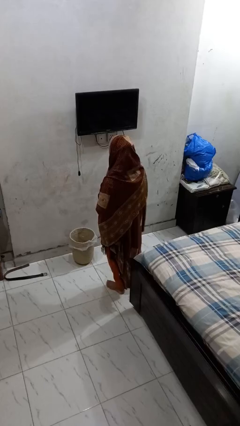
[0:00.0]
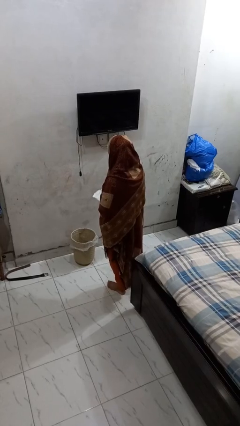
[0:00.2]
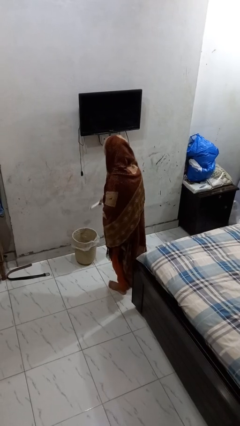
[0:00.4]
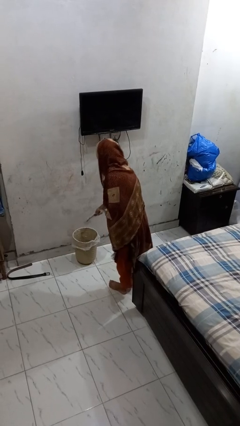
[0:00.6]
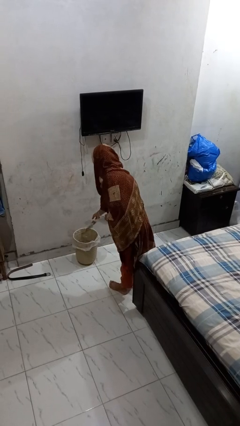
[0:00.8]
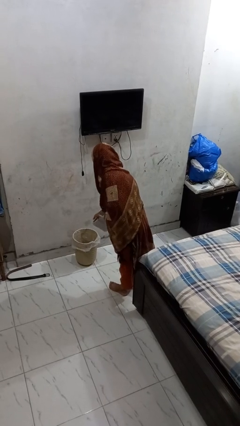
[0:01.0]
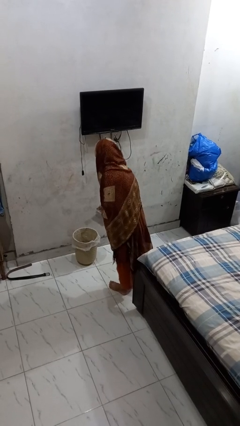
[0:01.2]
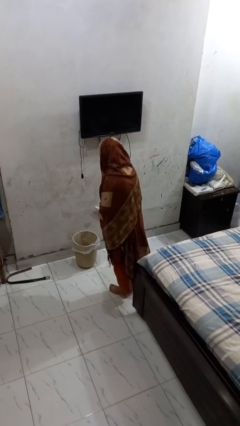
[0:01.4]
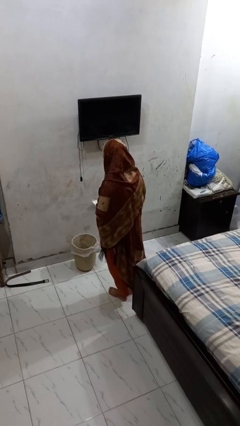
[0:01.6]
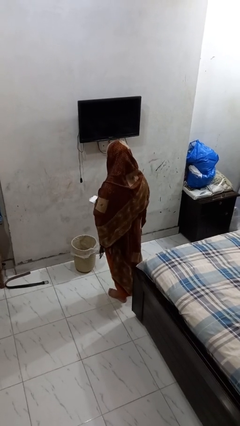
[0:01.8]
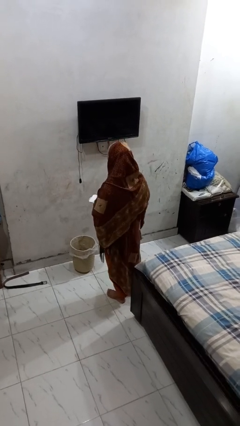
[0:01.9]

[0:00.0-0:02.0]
person discards trash

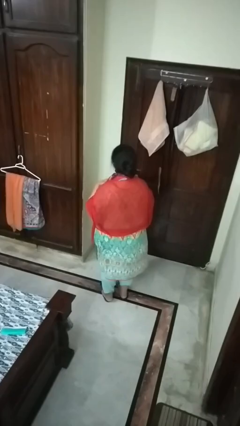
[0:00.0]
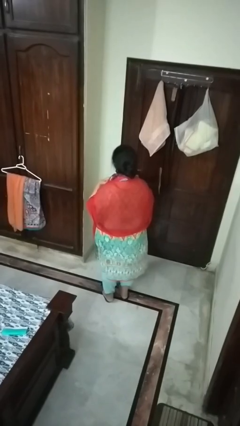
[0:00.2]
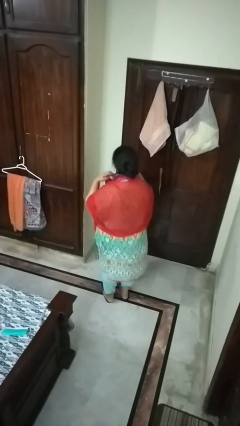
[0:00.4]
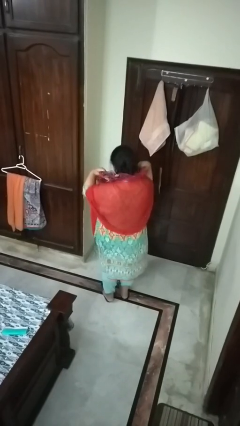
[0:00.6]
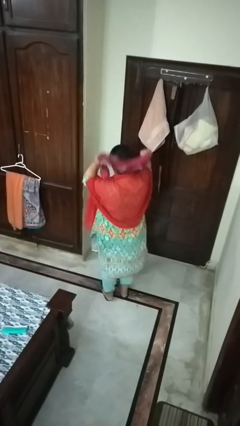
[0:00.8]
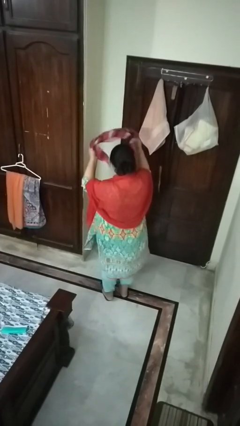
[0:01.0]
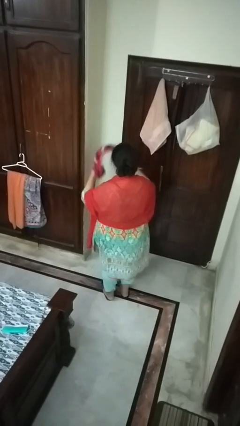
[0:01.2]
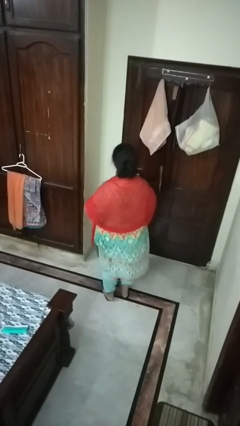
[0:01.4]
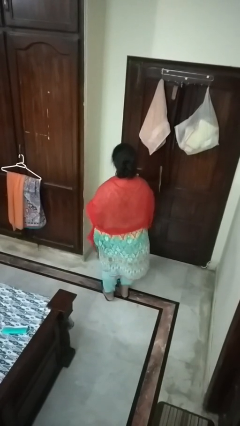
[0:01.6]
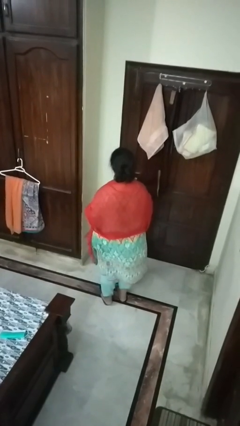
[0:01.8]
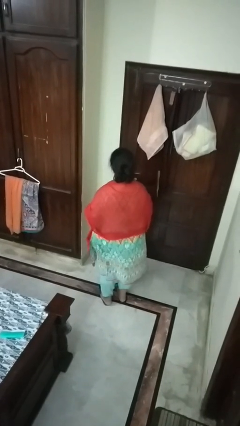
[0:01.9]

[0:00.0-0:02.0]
person takes off scarf

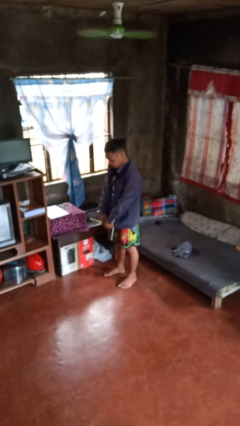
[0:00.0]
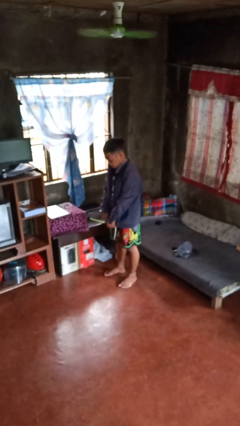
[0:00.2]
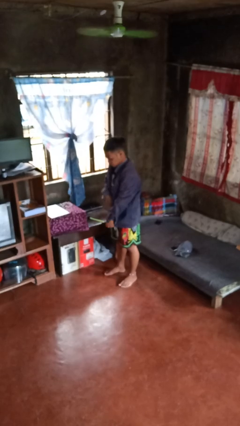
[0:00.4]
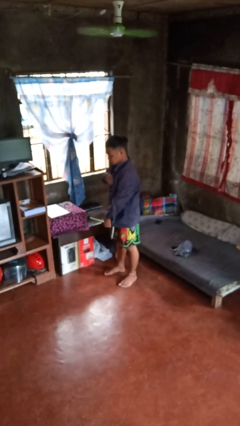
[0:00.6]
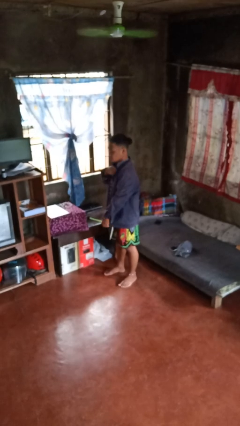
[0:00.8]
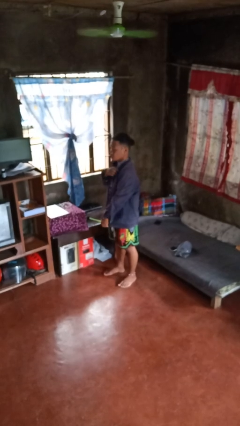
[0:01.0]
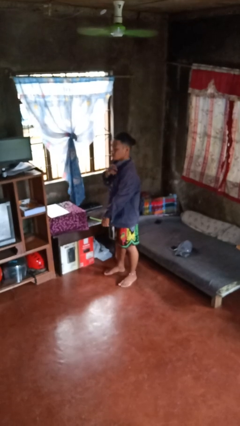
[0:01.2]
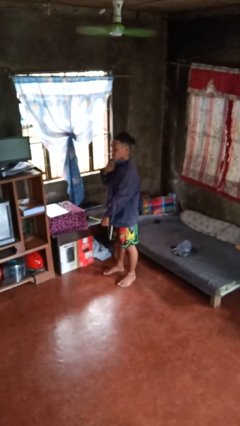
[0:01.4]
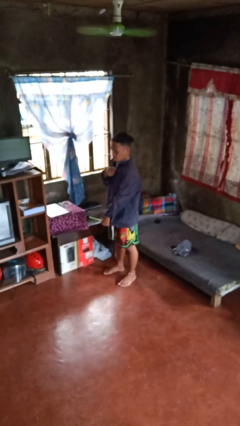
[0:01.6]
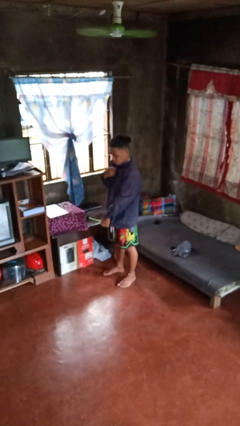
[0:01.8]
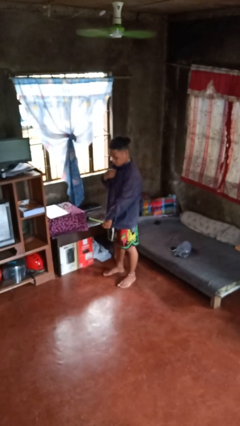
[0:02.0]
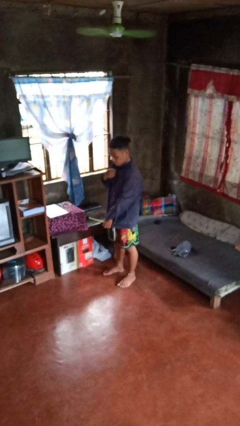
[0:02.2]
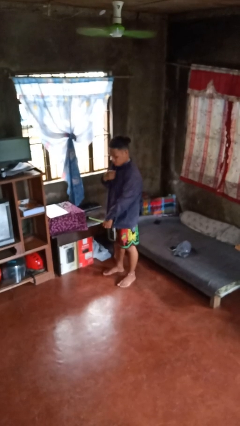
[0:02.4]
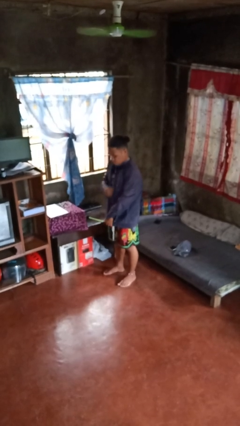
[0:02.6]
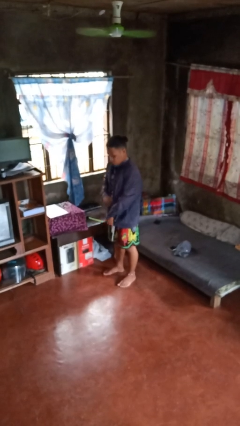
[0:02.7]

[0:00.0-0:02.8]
person zips up jacket

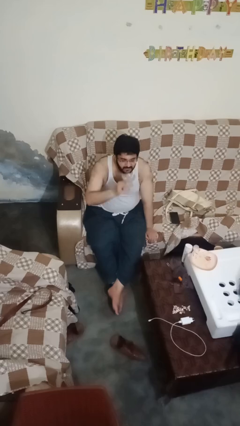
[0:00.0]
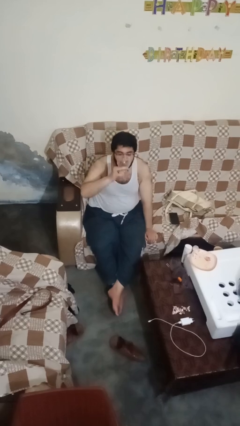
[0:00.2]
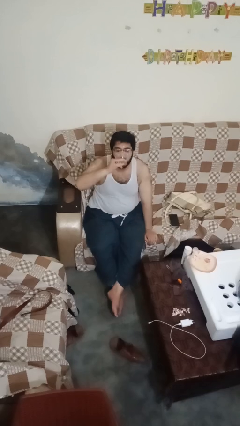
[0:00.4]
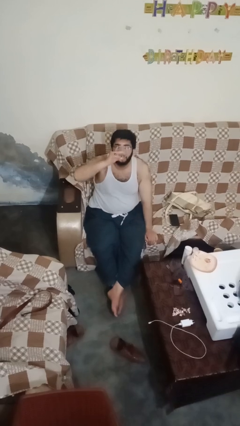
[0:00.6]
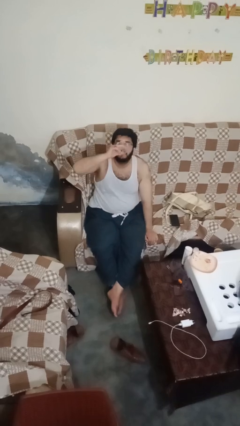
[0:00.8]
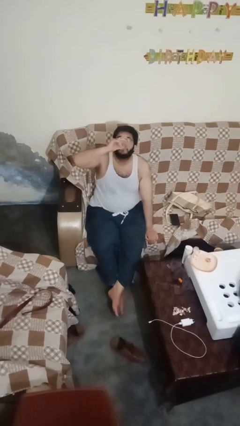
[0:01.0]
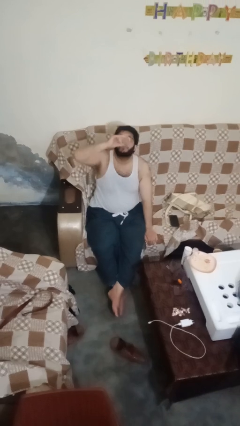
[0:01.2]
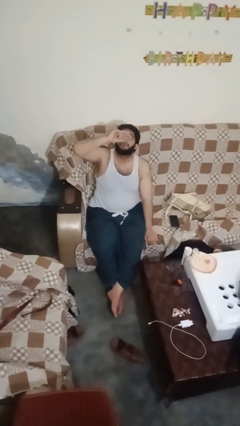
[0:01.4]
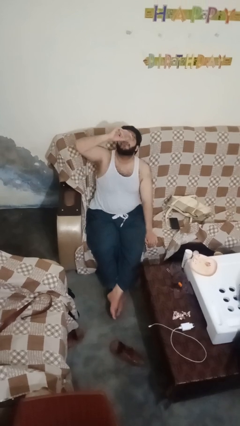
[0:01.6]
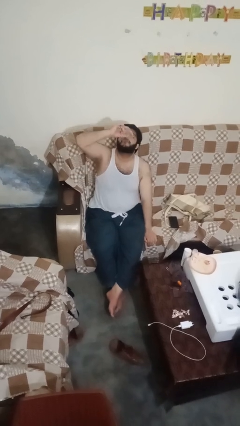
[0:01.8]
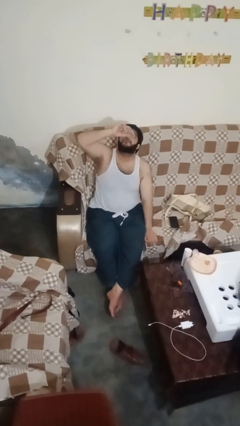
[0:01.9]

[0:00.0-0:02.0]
person drinks from shotglass

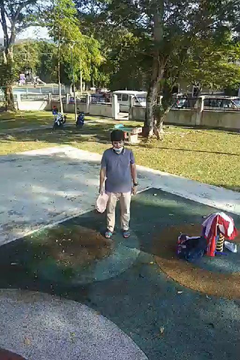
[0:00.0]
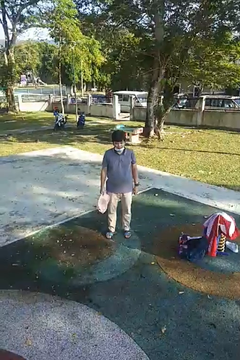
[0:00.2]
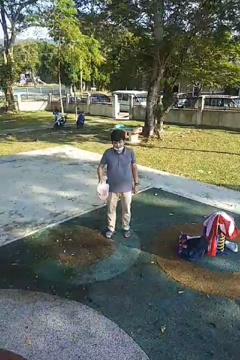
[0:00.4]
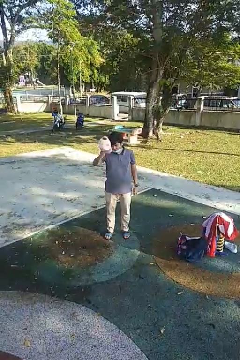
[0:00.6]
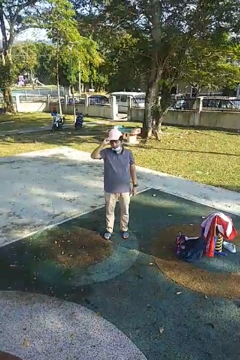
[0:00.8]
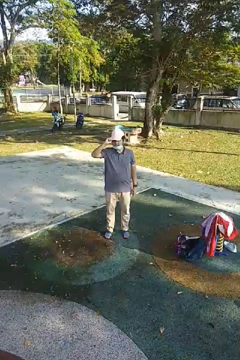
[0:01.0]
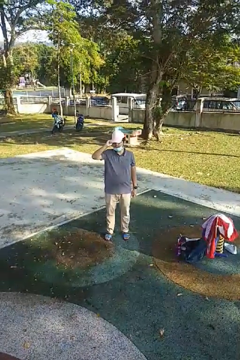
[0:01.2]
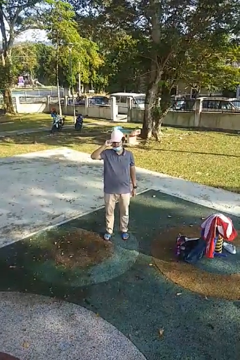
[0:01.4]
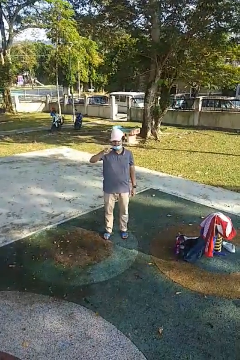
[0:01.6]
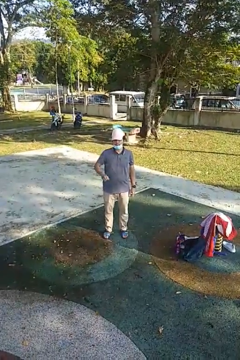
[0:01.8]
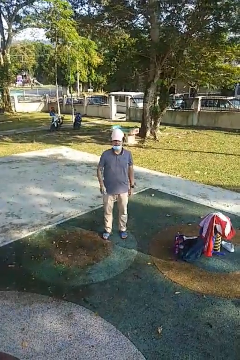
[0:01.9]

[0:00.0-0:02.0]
person puts on hat

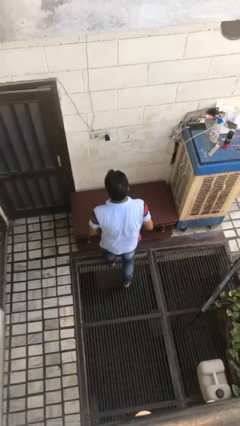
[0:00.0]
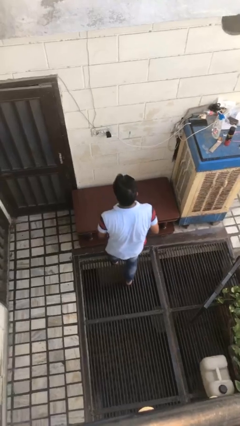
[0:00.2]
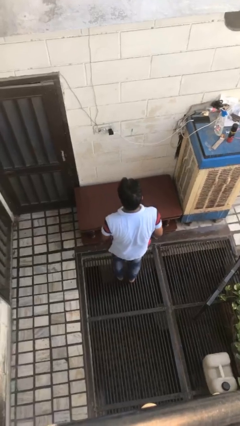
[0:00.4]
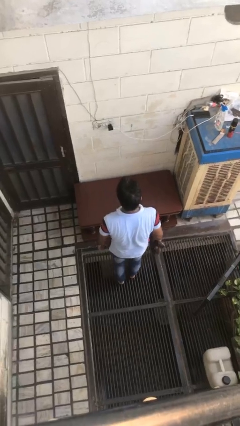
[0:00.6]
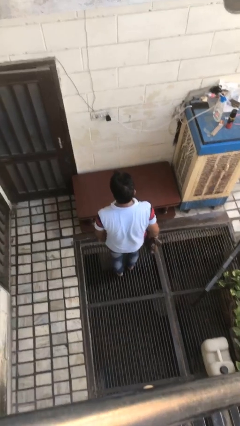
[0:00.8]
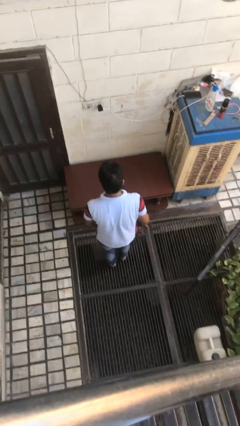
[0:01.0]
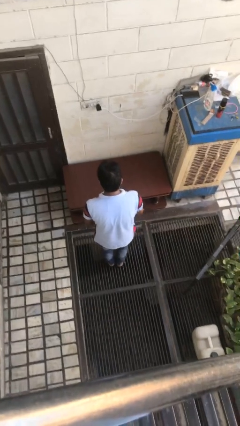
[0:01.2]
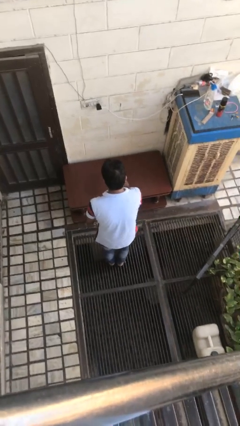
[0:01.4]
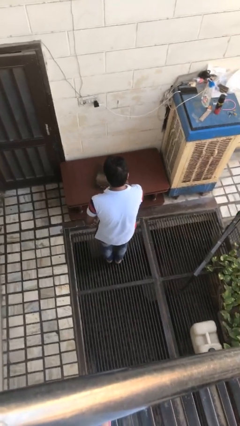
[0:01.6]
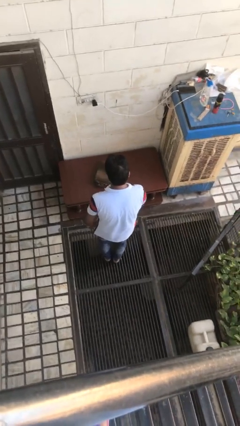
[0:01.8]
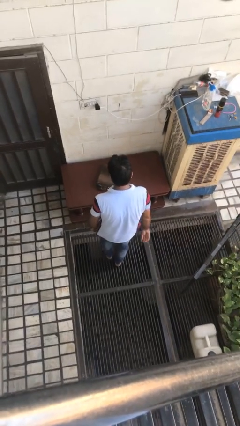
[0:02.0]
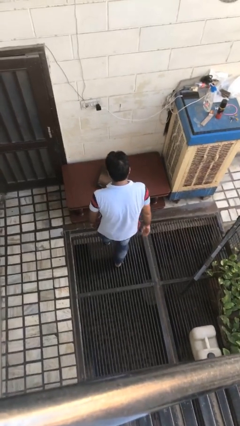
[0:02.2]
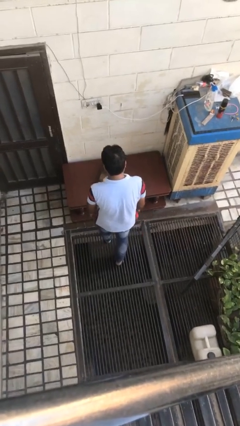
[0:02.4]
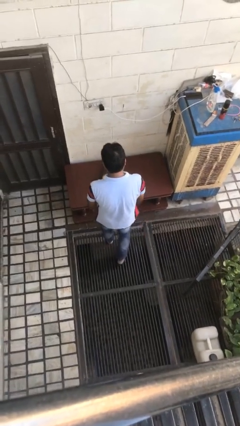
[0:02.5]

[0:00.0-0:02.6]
person throws object on table

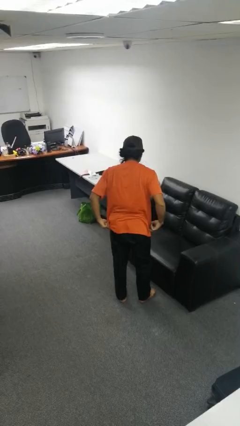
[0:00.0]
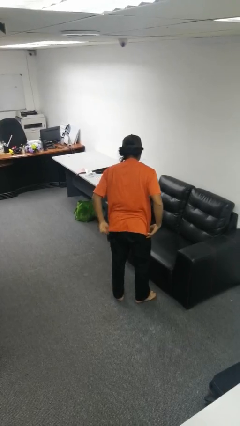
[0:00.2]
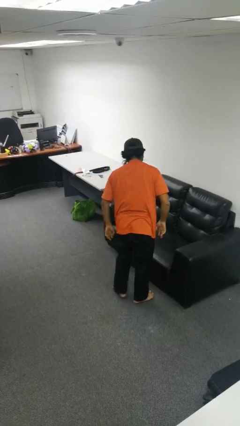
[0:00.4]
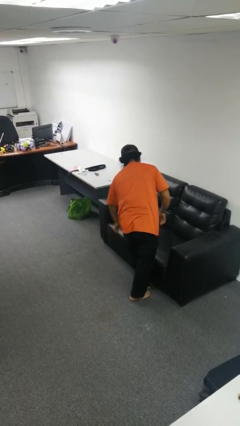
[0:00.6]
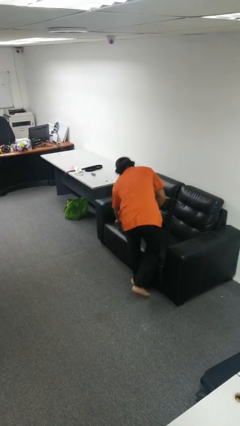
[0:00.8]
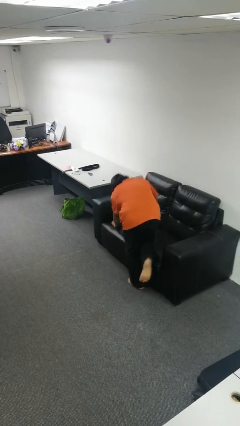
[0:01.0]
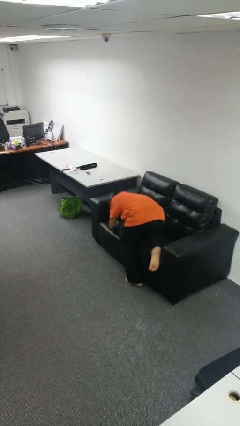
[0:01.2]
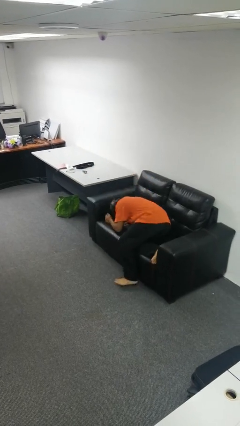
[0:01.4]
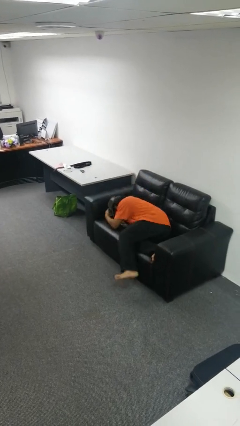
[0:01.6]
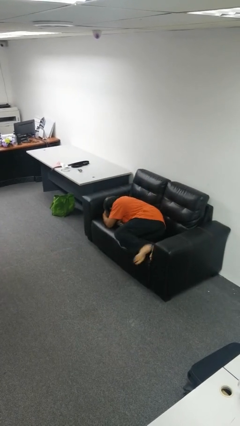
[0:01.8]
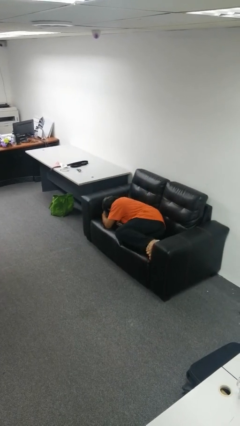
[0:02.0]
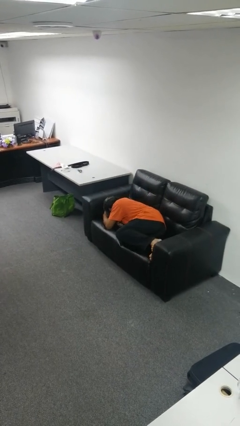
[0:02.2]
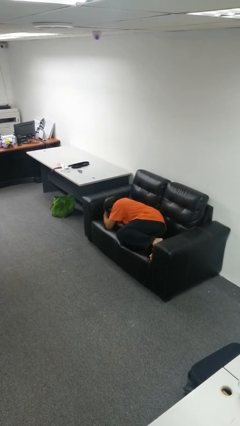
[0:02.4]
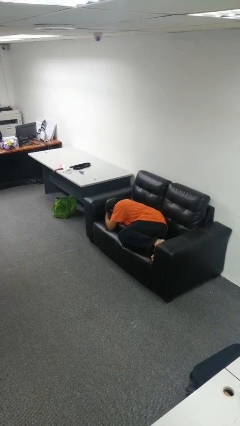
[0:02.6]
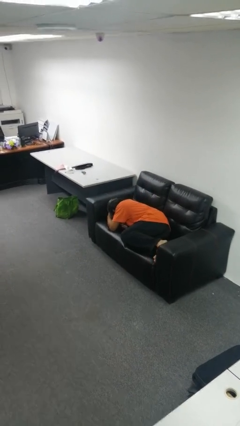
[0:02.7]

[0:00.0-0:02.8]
person lies down on couch

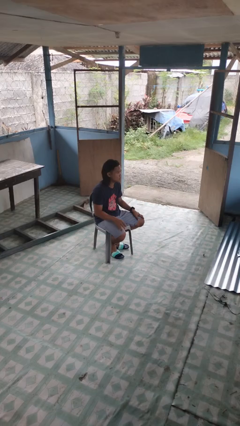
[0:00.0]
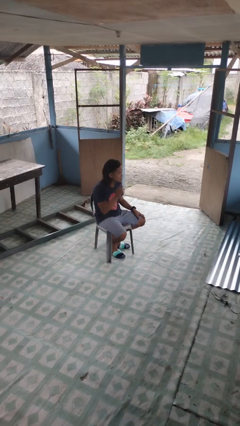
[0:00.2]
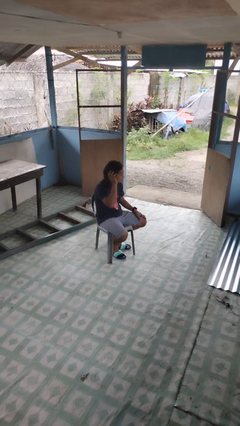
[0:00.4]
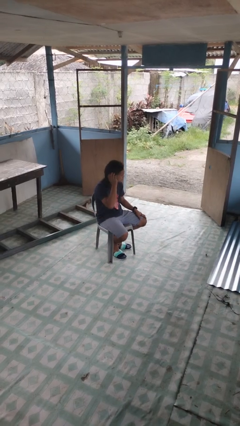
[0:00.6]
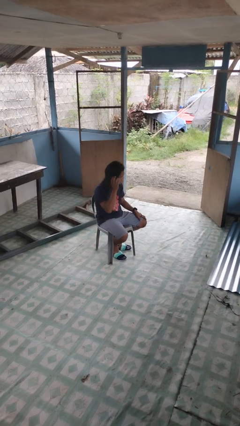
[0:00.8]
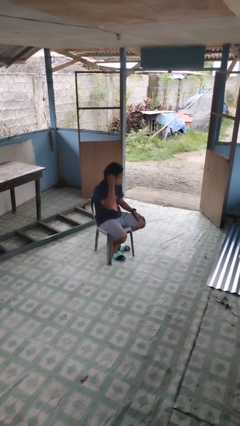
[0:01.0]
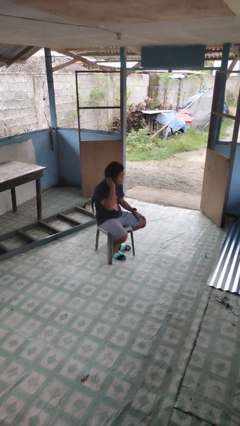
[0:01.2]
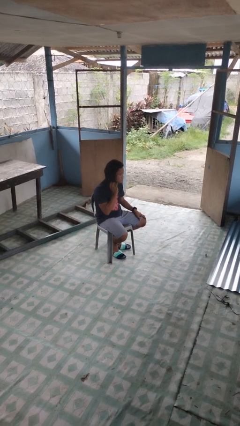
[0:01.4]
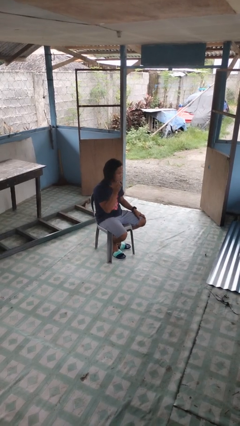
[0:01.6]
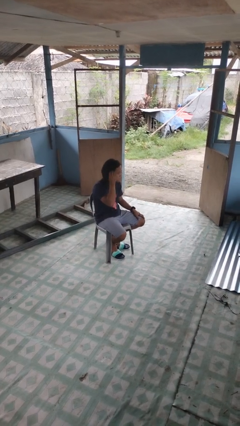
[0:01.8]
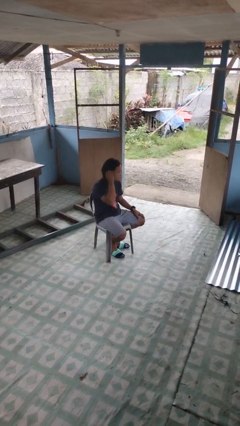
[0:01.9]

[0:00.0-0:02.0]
person strokes hair
